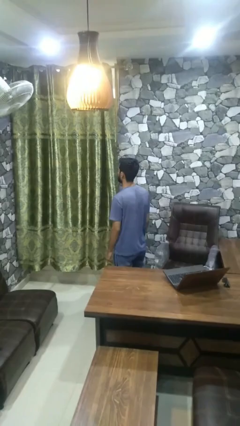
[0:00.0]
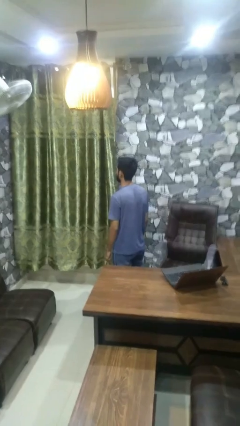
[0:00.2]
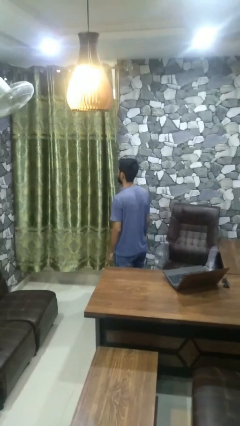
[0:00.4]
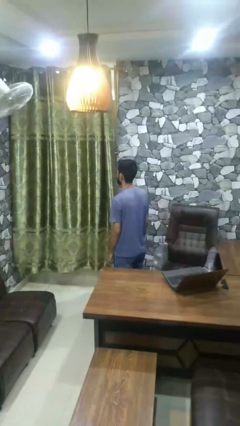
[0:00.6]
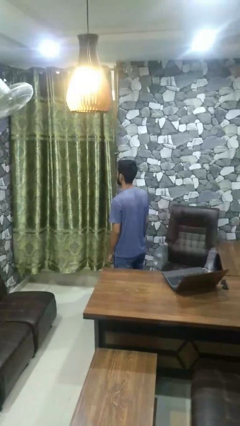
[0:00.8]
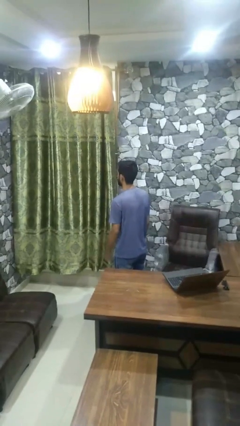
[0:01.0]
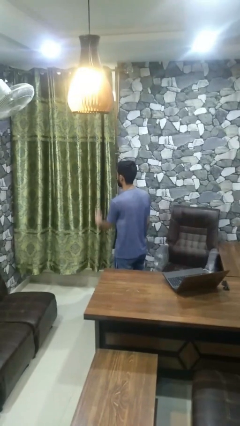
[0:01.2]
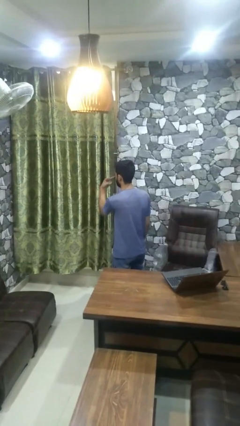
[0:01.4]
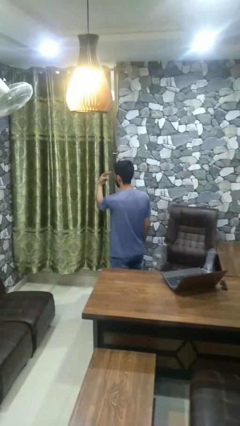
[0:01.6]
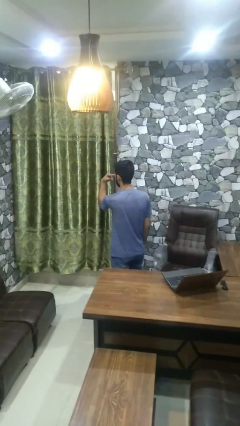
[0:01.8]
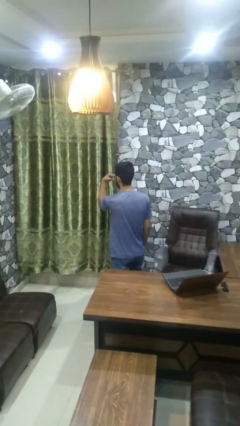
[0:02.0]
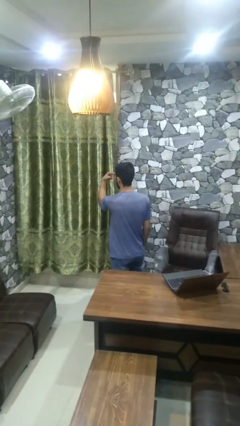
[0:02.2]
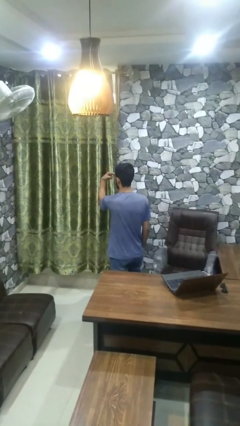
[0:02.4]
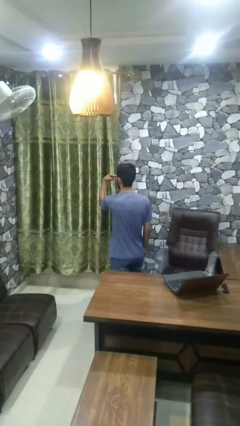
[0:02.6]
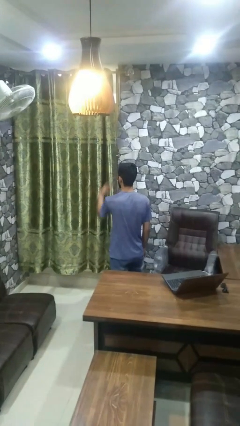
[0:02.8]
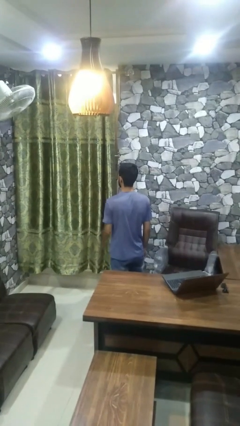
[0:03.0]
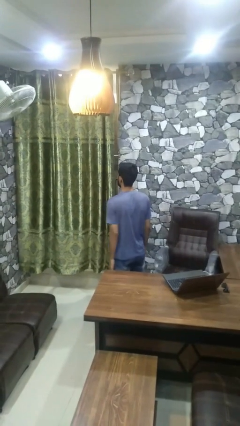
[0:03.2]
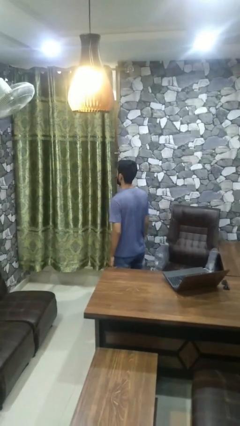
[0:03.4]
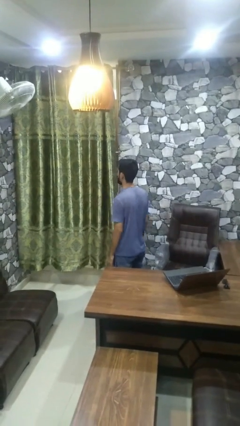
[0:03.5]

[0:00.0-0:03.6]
person gestures watch closely

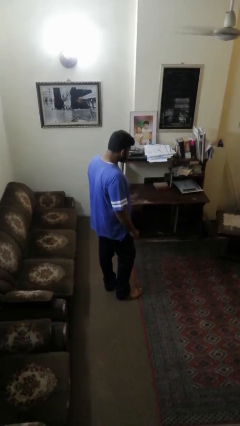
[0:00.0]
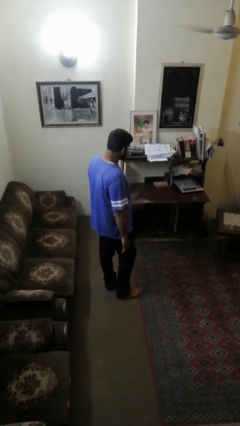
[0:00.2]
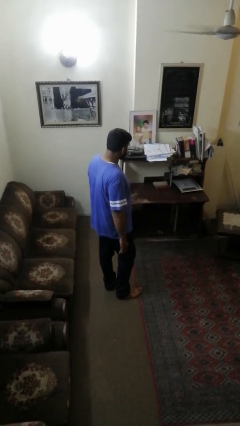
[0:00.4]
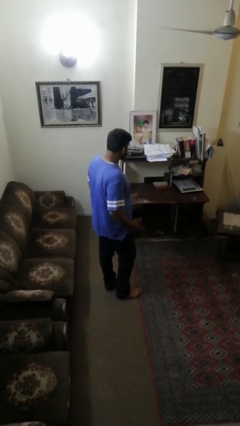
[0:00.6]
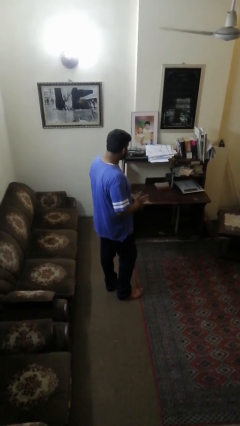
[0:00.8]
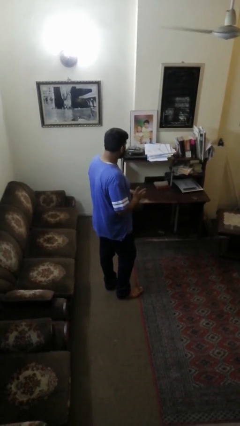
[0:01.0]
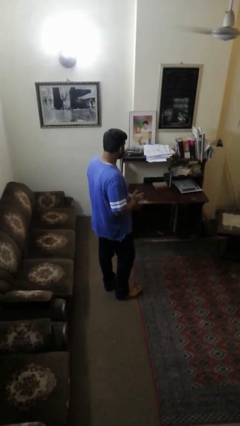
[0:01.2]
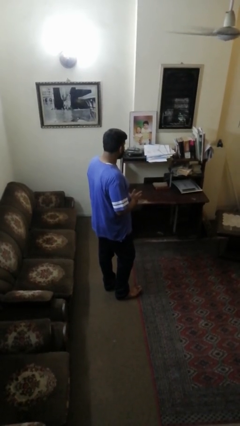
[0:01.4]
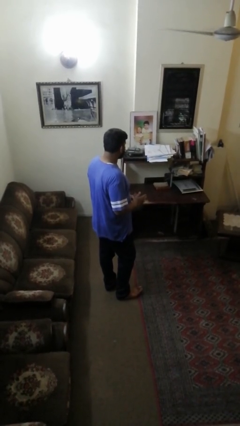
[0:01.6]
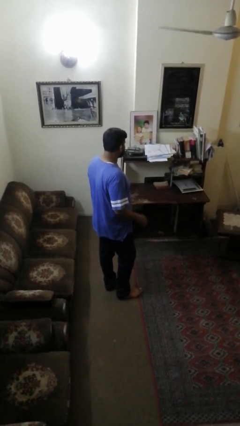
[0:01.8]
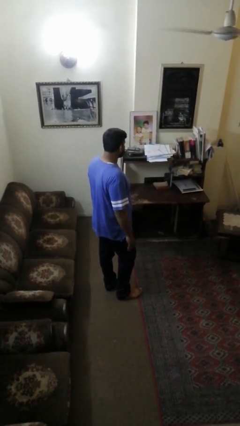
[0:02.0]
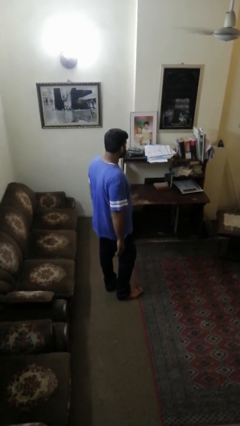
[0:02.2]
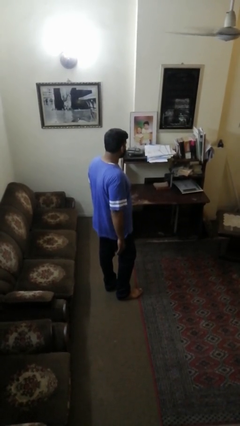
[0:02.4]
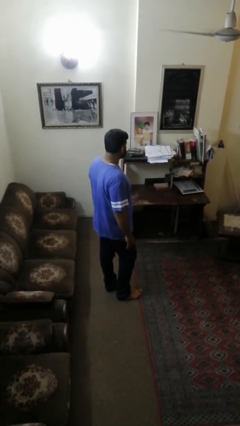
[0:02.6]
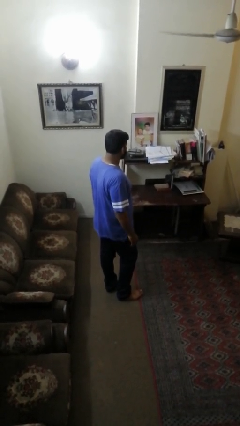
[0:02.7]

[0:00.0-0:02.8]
person takes off ring

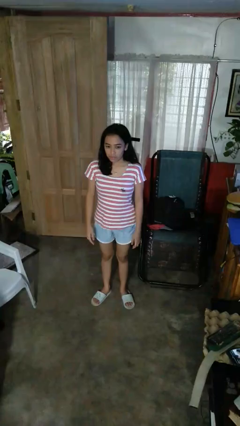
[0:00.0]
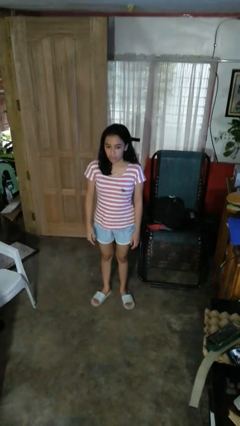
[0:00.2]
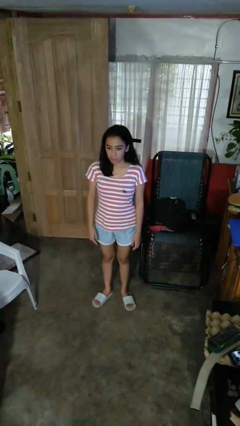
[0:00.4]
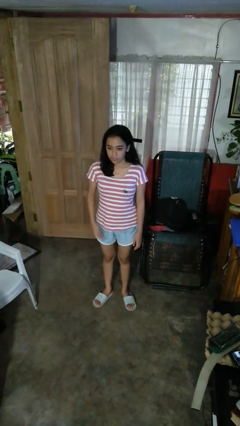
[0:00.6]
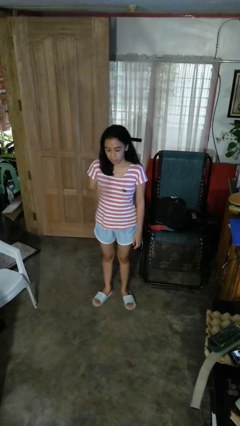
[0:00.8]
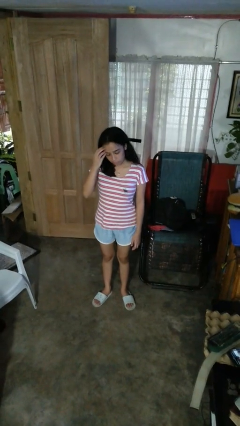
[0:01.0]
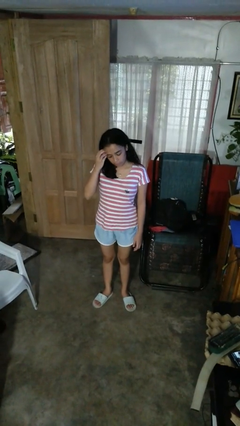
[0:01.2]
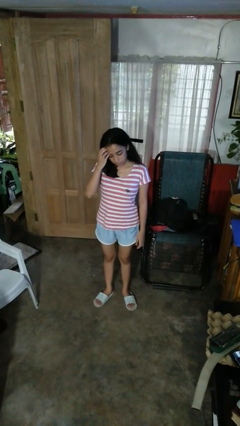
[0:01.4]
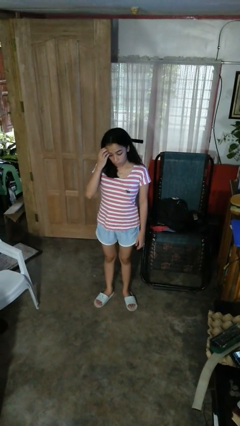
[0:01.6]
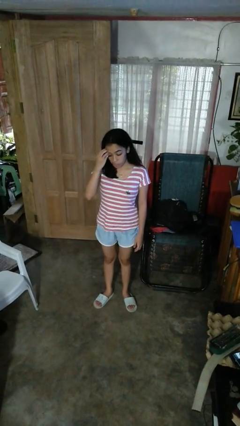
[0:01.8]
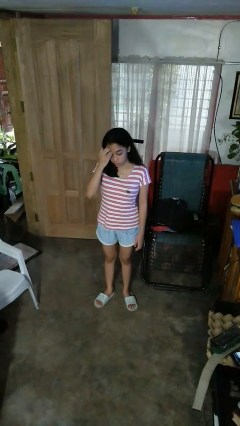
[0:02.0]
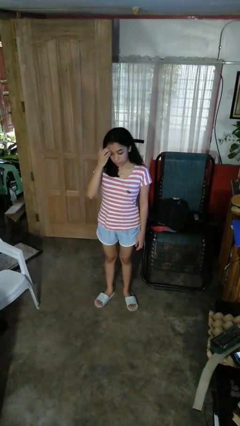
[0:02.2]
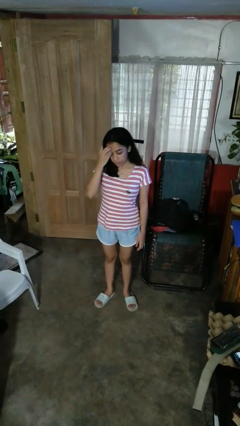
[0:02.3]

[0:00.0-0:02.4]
person scratches face

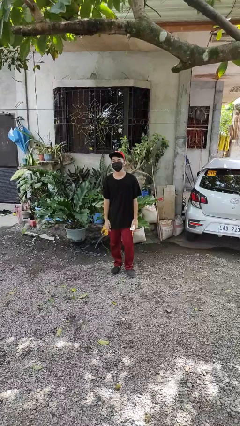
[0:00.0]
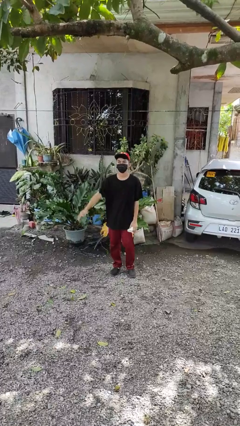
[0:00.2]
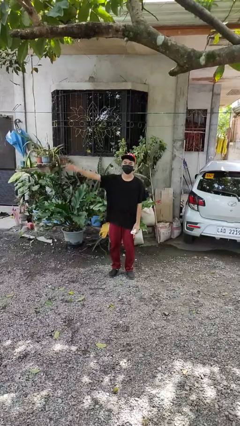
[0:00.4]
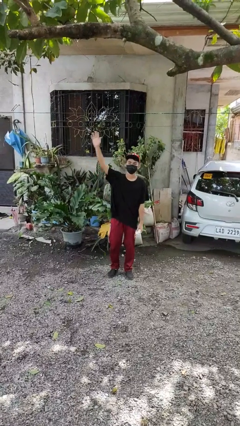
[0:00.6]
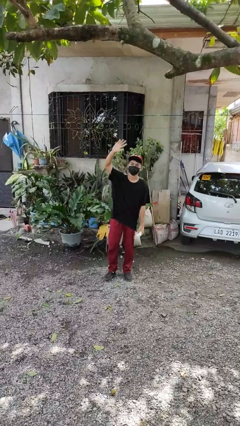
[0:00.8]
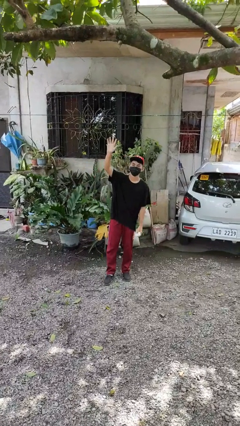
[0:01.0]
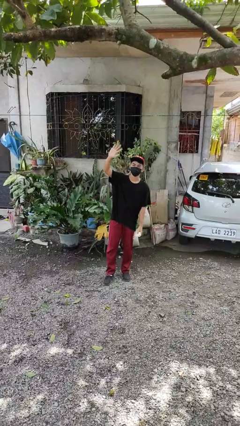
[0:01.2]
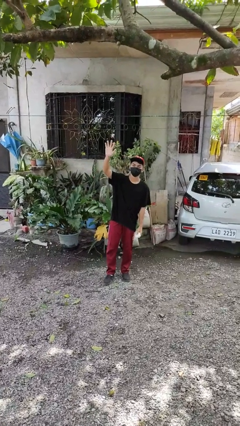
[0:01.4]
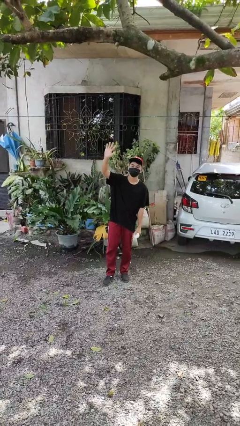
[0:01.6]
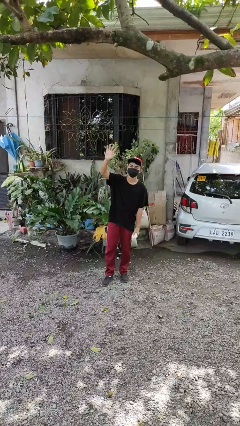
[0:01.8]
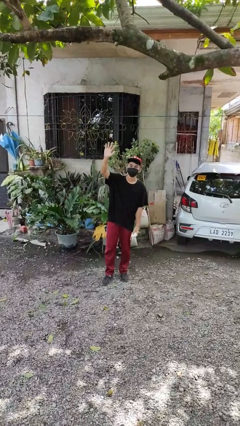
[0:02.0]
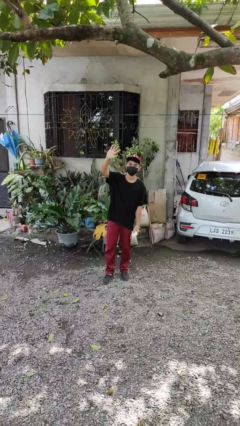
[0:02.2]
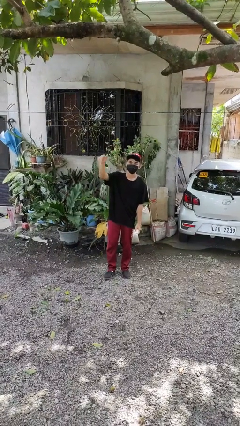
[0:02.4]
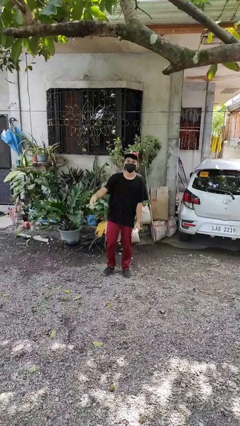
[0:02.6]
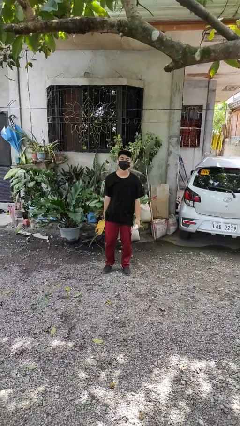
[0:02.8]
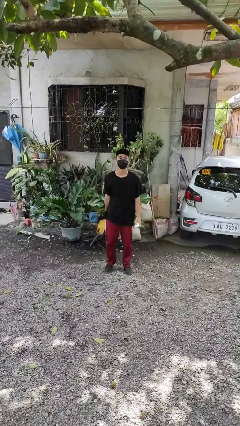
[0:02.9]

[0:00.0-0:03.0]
person waves at person

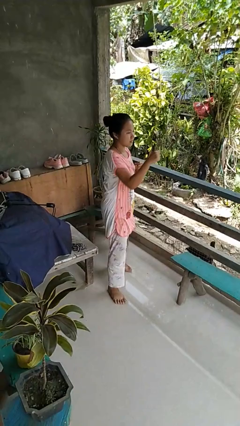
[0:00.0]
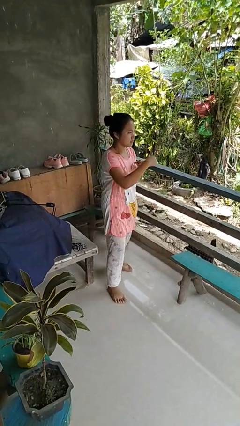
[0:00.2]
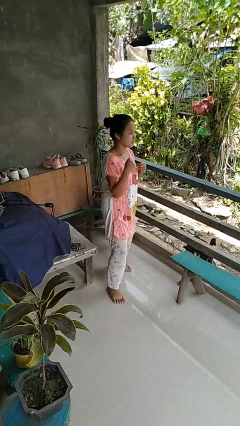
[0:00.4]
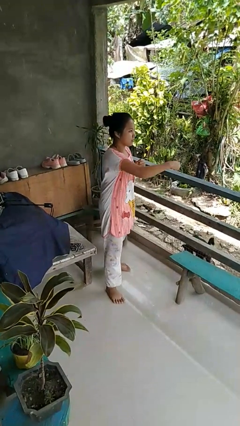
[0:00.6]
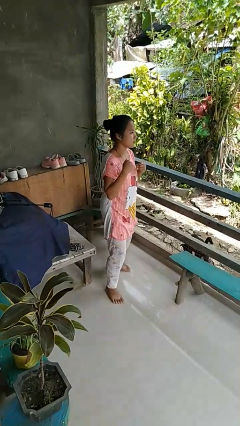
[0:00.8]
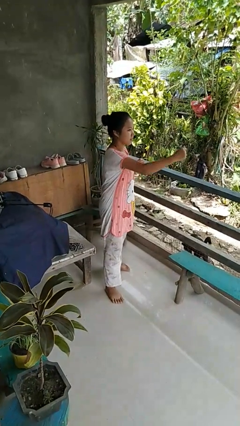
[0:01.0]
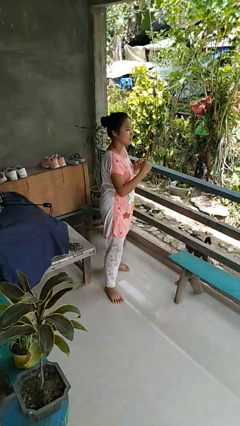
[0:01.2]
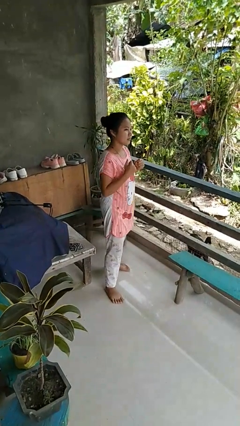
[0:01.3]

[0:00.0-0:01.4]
person punches

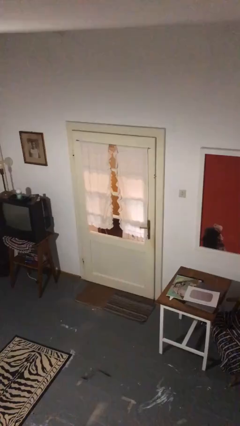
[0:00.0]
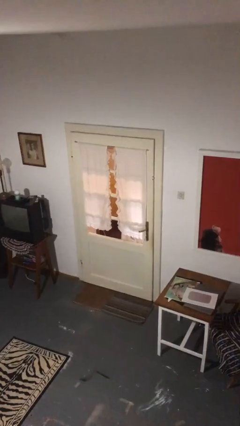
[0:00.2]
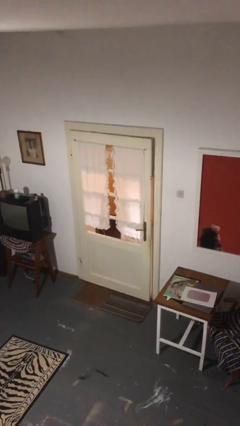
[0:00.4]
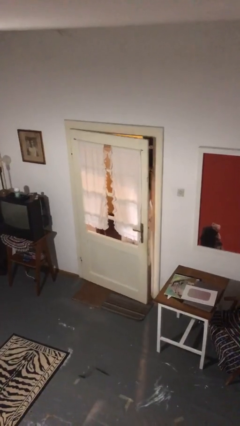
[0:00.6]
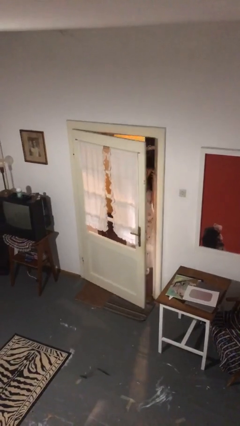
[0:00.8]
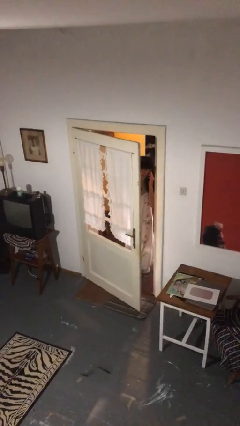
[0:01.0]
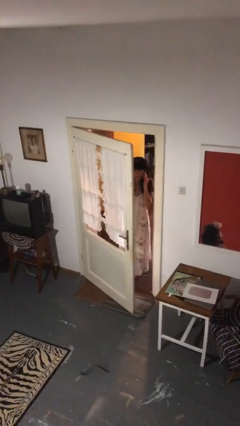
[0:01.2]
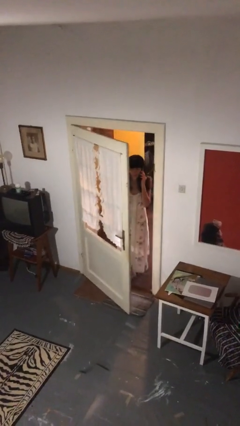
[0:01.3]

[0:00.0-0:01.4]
person opens facility door

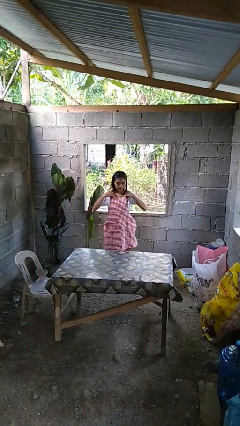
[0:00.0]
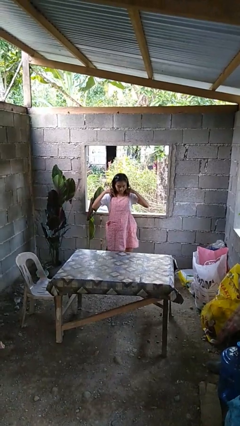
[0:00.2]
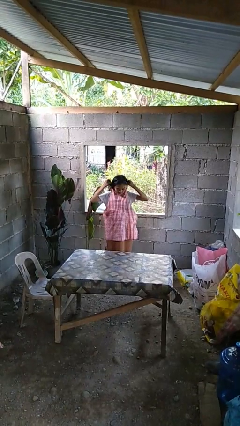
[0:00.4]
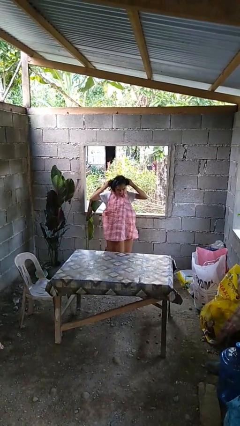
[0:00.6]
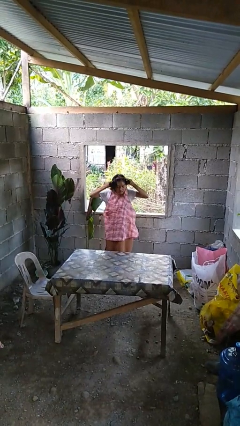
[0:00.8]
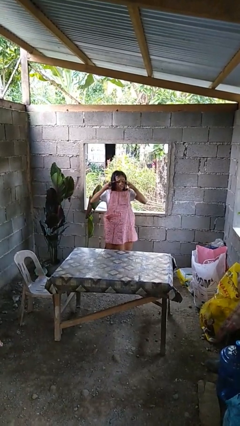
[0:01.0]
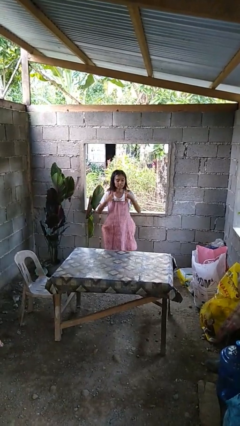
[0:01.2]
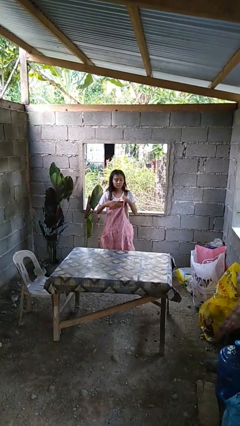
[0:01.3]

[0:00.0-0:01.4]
person takes off apron

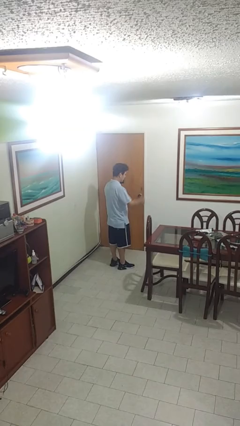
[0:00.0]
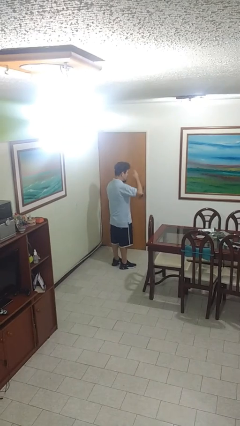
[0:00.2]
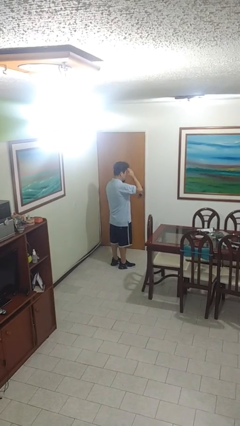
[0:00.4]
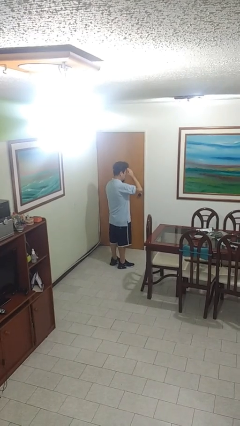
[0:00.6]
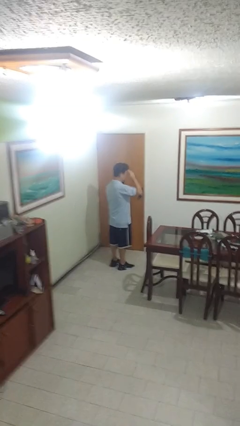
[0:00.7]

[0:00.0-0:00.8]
person salutes
